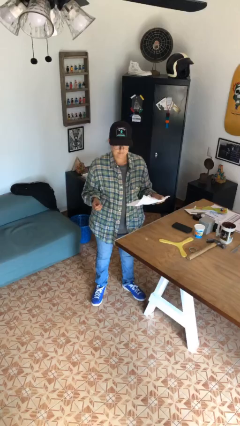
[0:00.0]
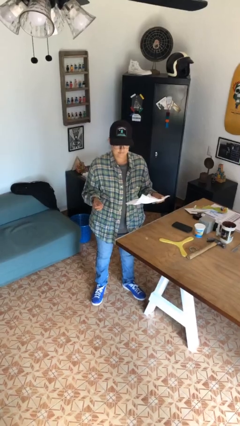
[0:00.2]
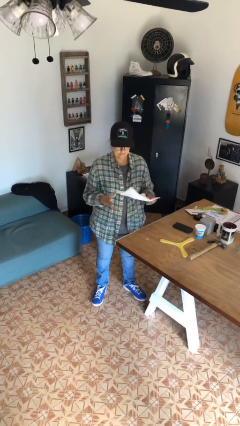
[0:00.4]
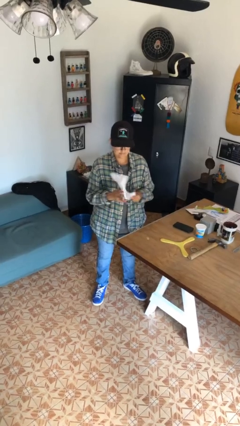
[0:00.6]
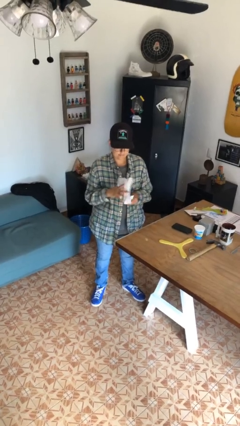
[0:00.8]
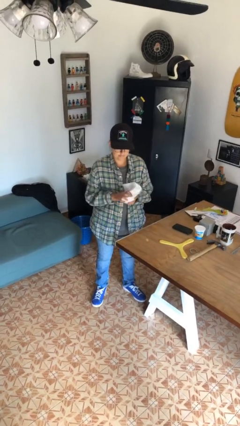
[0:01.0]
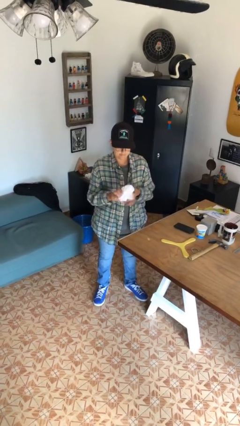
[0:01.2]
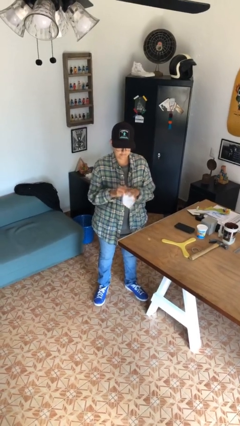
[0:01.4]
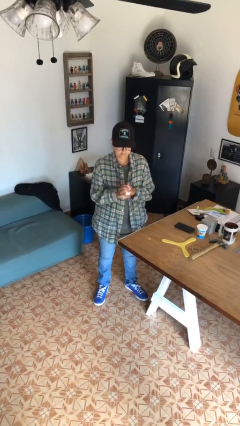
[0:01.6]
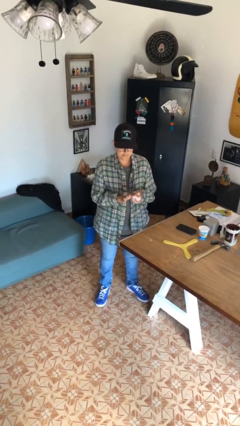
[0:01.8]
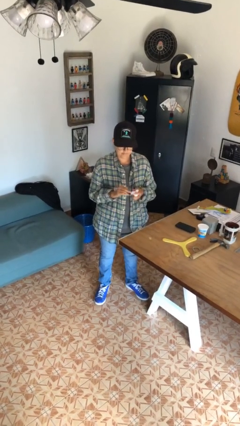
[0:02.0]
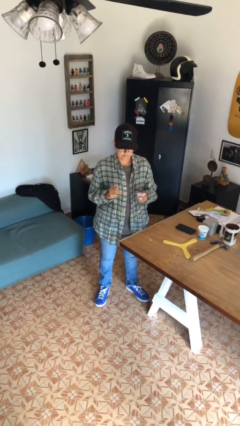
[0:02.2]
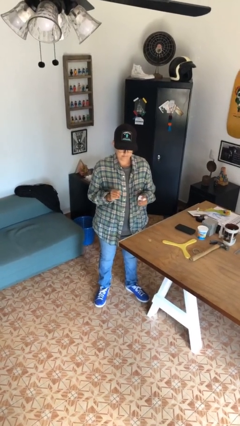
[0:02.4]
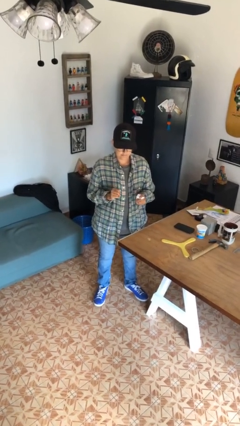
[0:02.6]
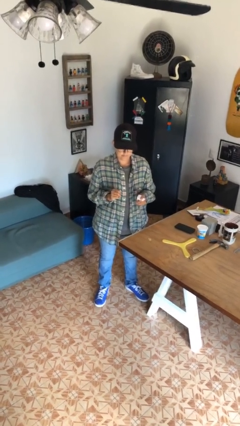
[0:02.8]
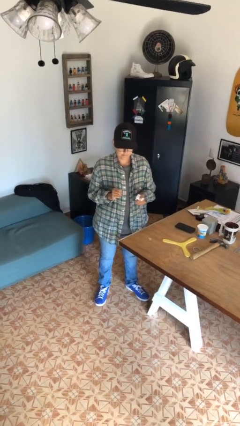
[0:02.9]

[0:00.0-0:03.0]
person crumples paper

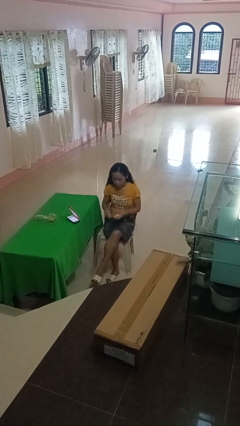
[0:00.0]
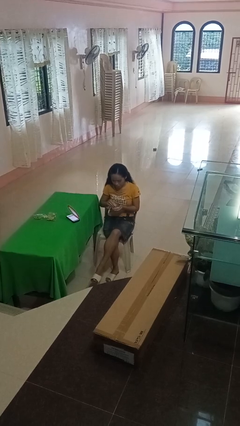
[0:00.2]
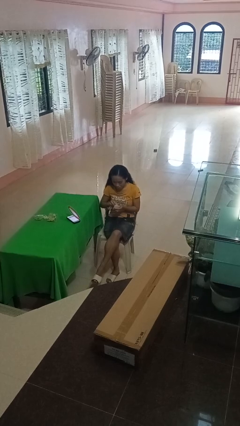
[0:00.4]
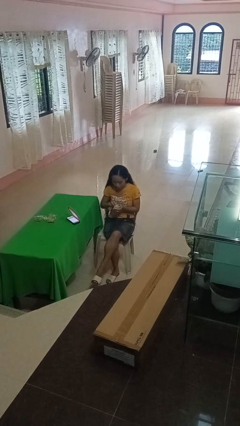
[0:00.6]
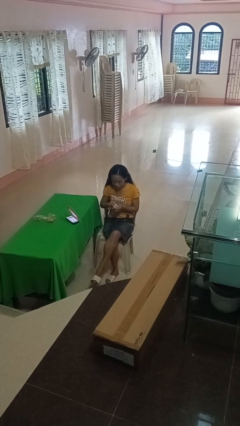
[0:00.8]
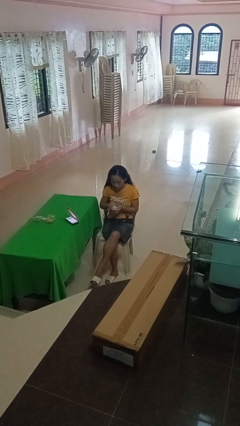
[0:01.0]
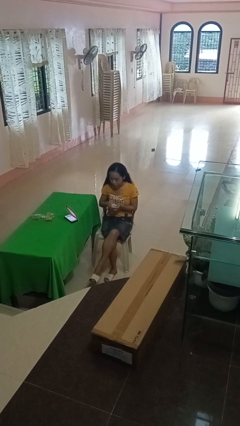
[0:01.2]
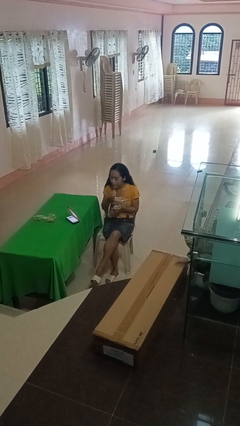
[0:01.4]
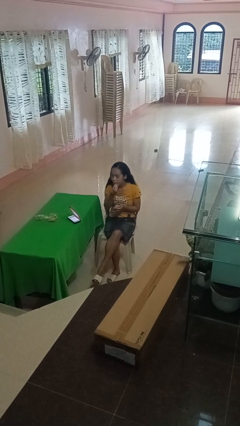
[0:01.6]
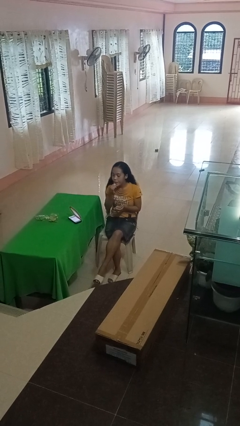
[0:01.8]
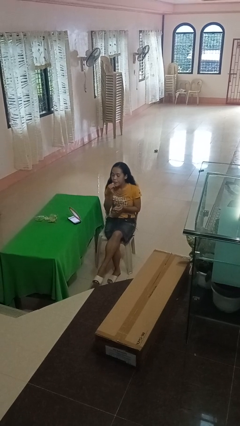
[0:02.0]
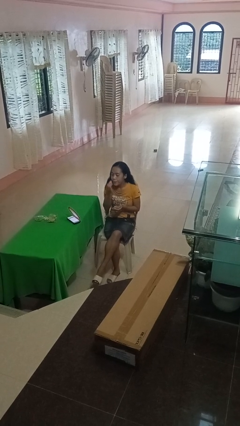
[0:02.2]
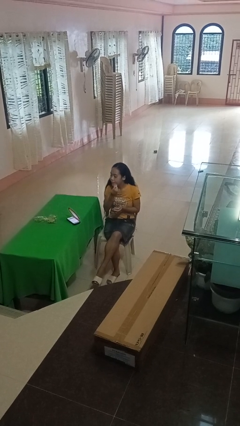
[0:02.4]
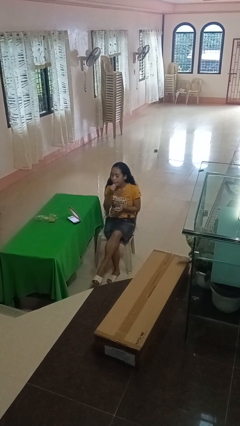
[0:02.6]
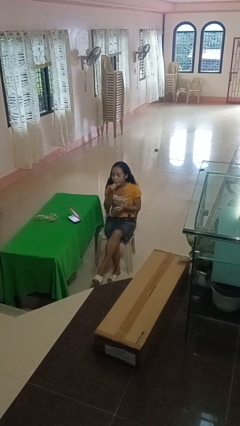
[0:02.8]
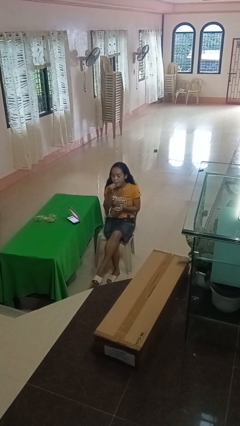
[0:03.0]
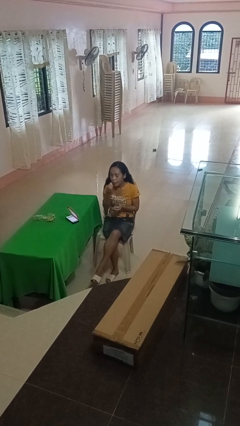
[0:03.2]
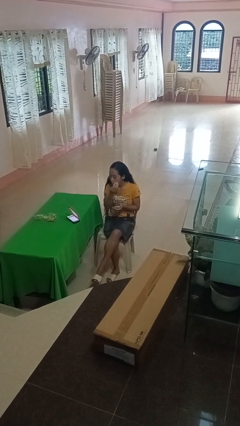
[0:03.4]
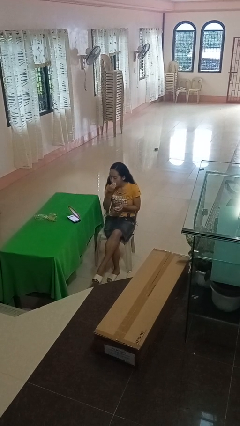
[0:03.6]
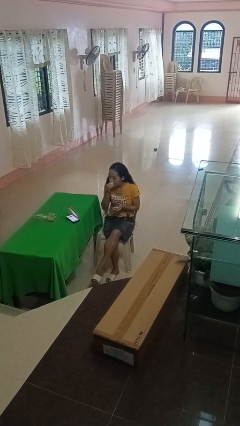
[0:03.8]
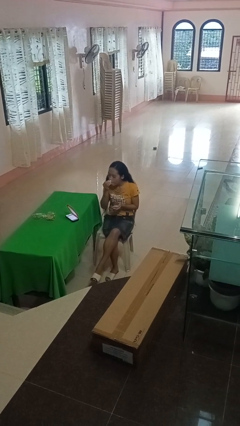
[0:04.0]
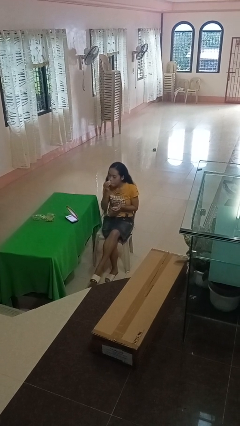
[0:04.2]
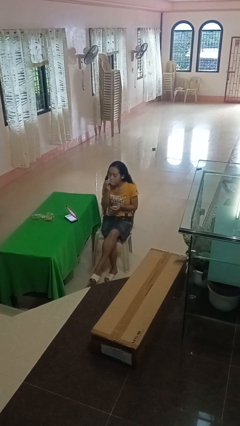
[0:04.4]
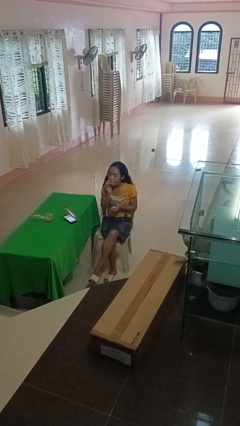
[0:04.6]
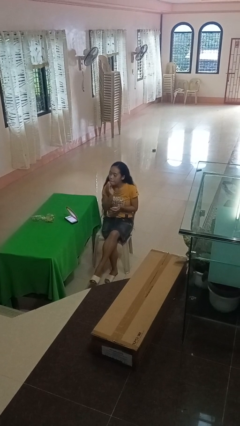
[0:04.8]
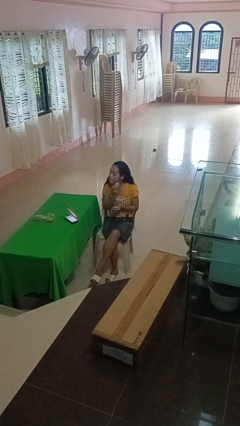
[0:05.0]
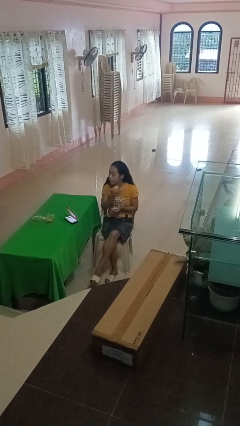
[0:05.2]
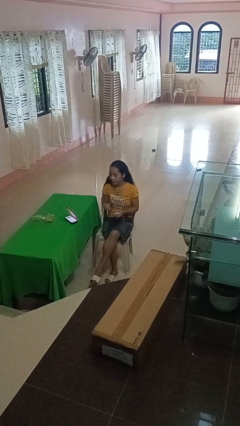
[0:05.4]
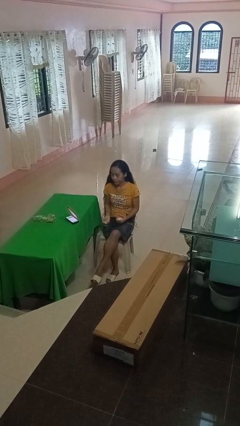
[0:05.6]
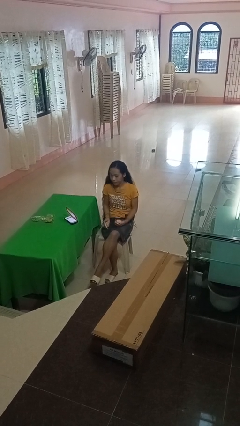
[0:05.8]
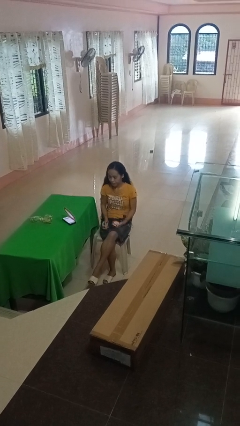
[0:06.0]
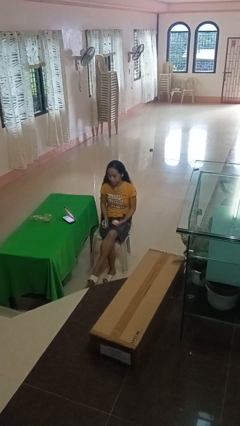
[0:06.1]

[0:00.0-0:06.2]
person applies foundation makeup

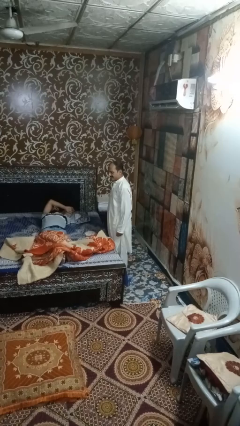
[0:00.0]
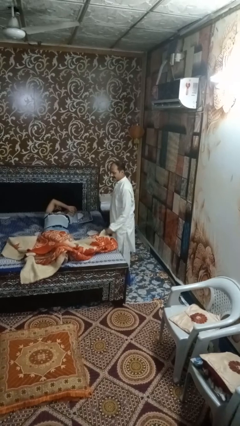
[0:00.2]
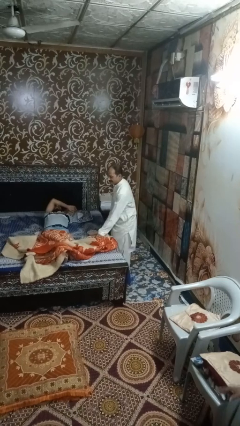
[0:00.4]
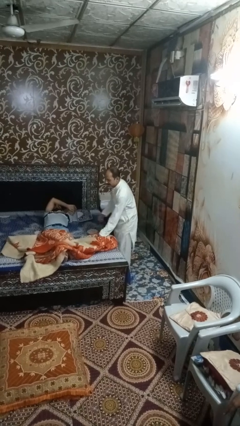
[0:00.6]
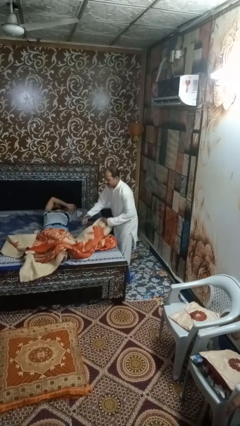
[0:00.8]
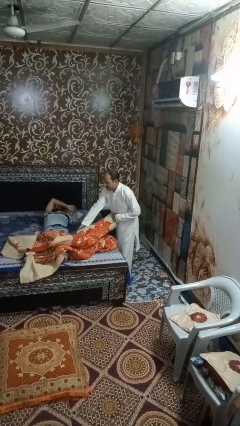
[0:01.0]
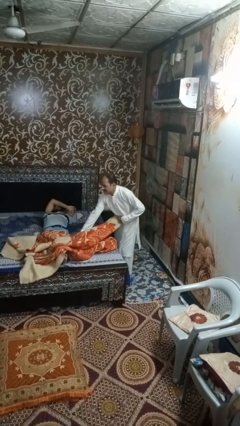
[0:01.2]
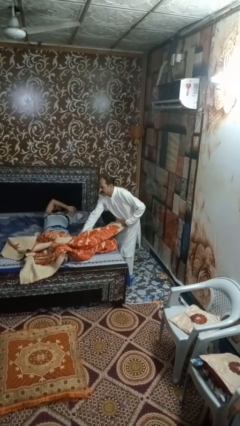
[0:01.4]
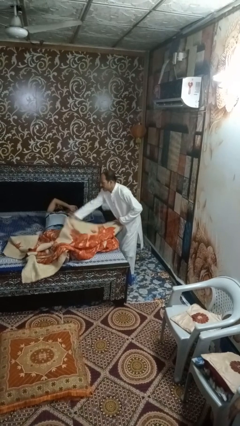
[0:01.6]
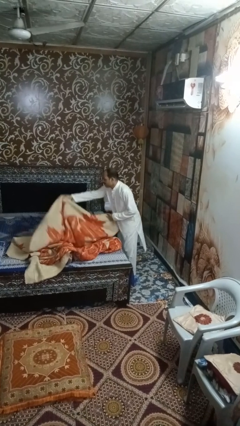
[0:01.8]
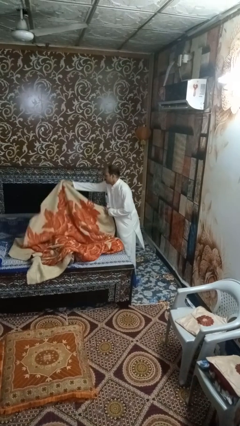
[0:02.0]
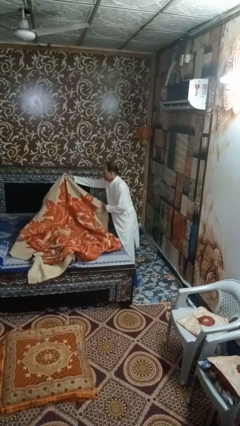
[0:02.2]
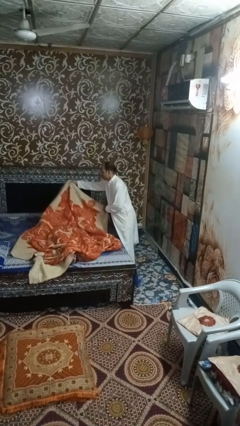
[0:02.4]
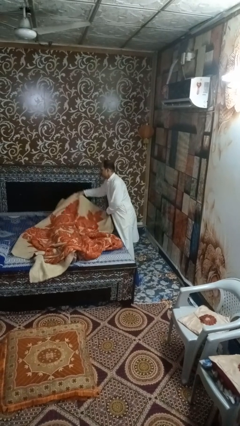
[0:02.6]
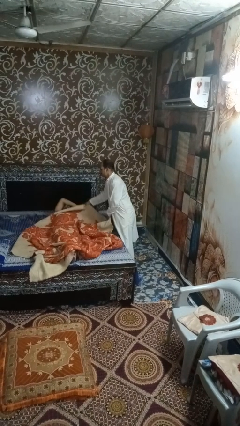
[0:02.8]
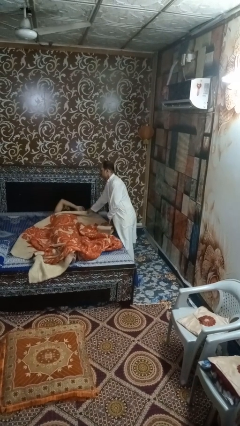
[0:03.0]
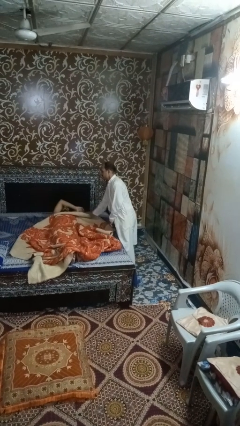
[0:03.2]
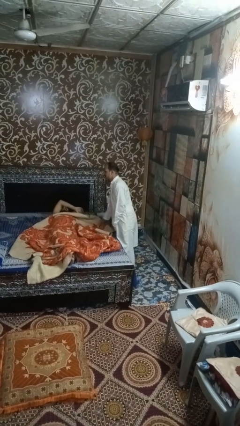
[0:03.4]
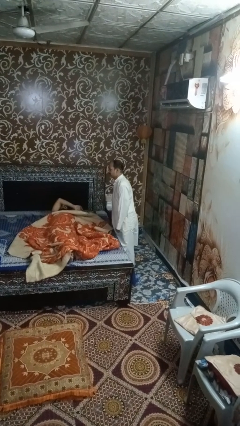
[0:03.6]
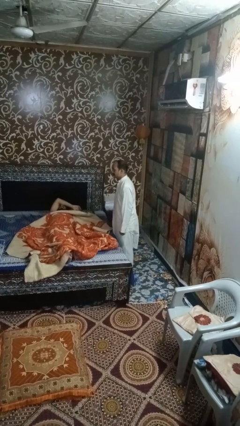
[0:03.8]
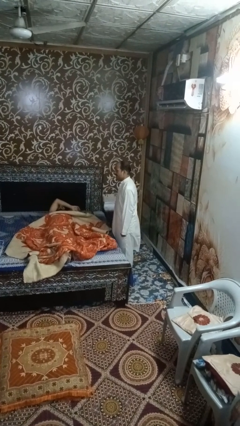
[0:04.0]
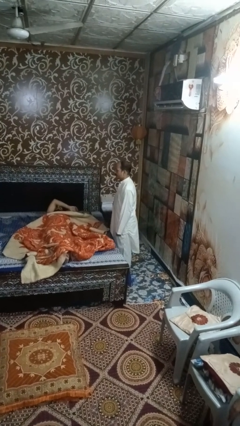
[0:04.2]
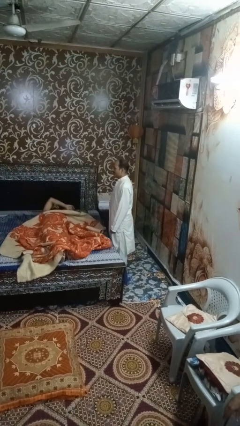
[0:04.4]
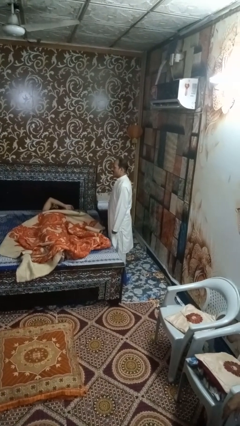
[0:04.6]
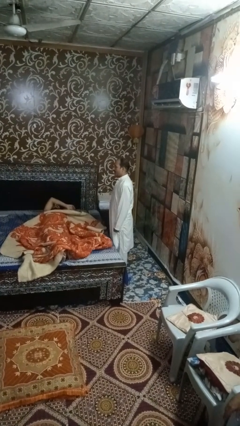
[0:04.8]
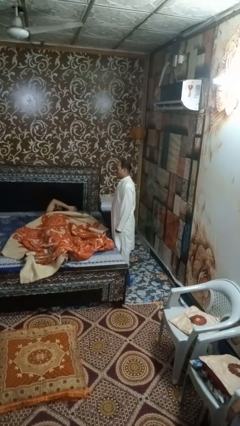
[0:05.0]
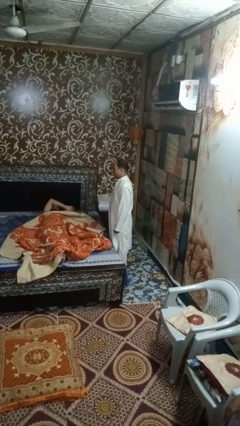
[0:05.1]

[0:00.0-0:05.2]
person covers friend with blanket

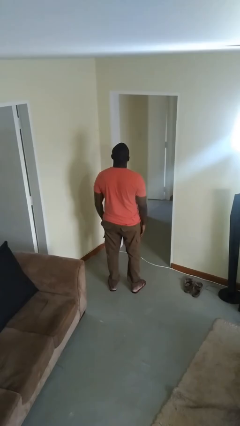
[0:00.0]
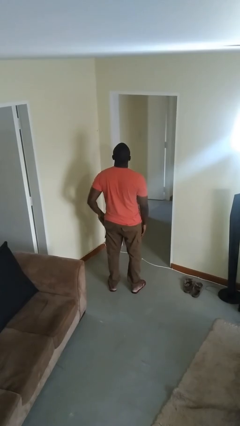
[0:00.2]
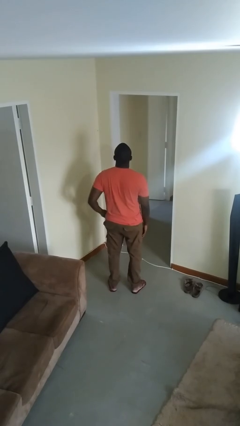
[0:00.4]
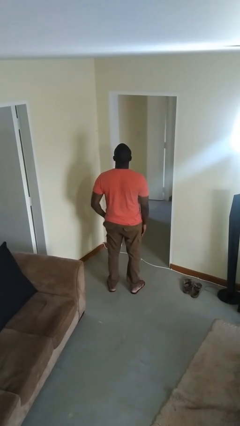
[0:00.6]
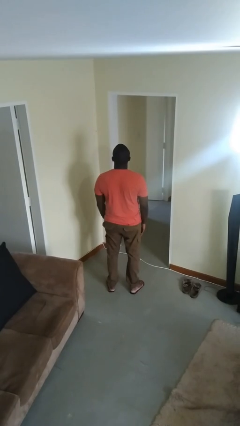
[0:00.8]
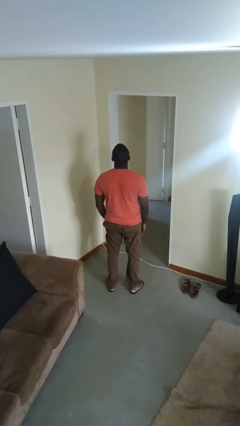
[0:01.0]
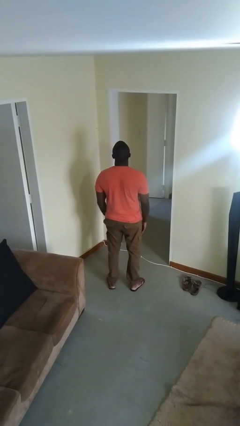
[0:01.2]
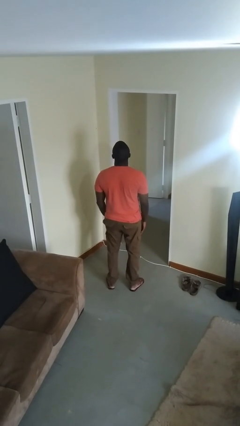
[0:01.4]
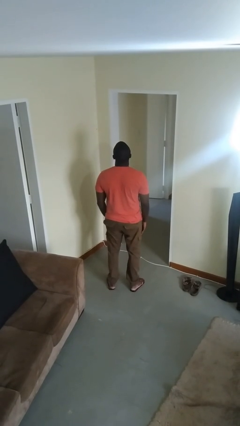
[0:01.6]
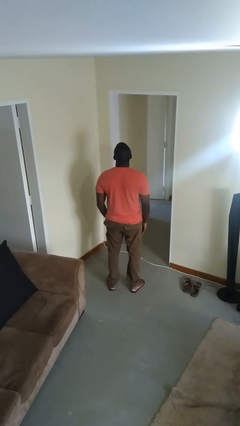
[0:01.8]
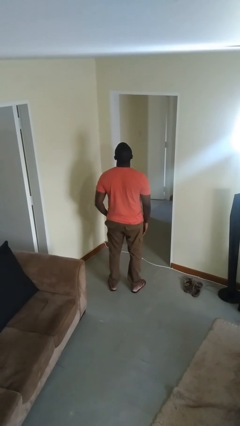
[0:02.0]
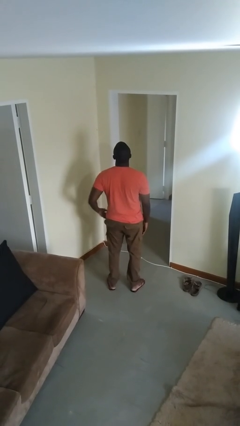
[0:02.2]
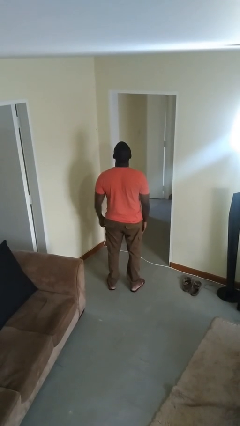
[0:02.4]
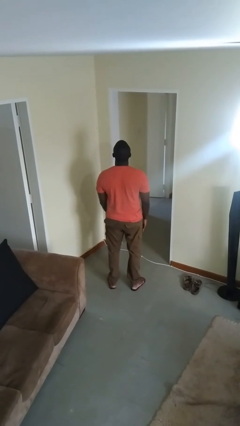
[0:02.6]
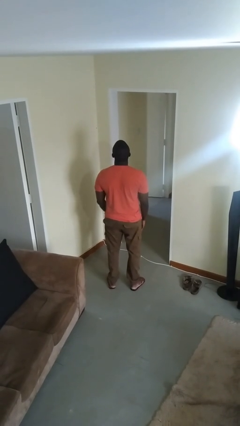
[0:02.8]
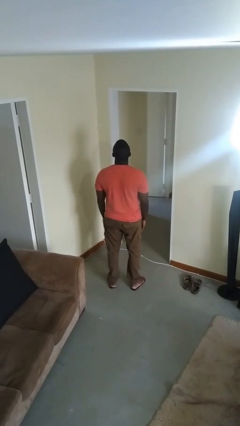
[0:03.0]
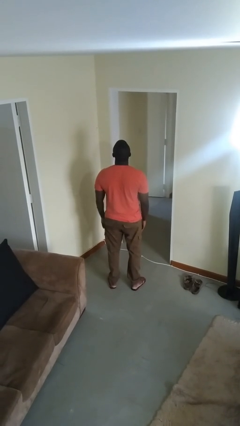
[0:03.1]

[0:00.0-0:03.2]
person puts hands in back pockets
